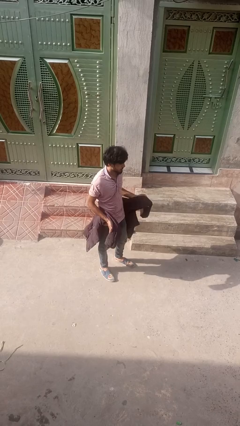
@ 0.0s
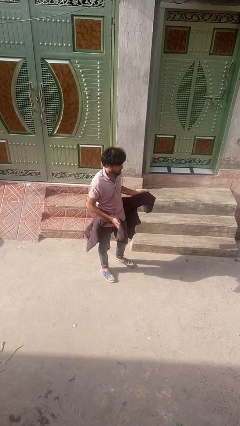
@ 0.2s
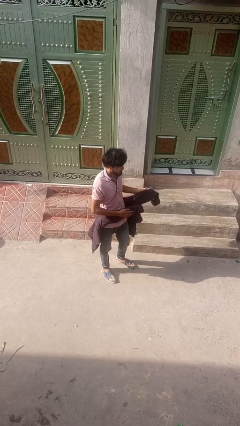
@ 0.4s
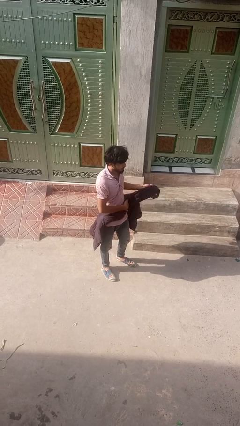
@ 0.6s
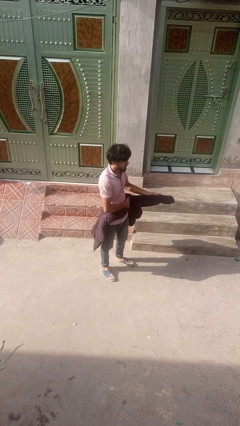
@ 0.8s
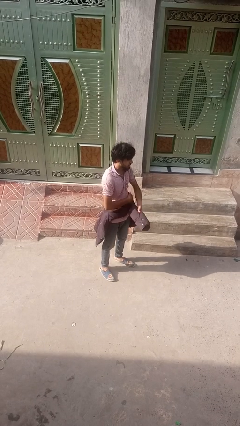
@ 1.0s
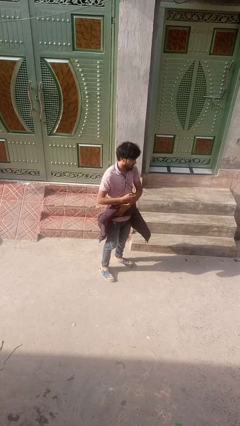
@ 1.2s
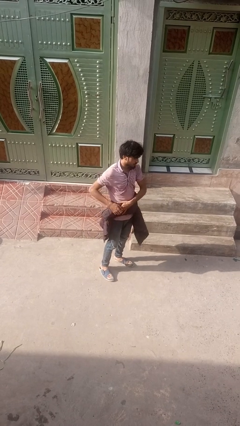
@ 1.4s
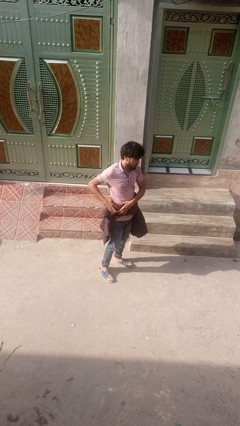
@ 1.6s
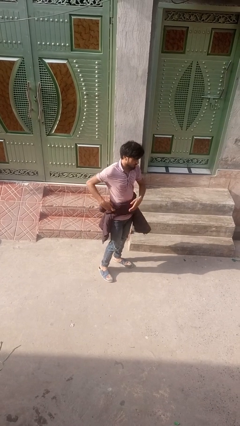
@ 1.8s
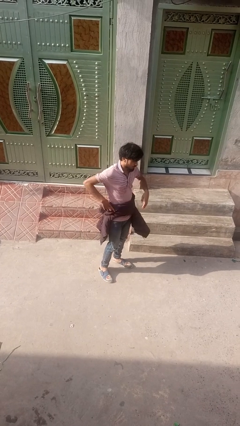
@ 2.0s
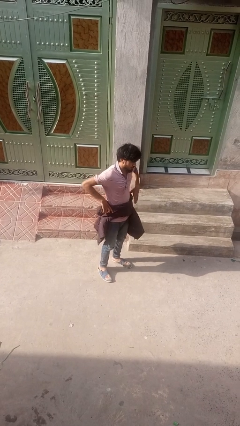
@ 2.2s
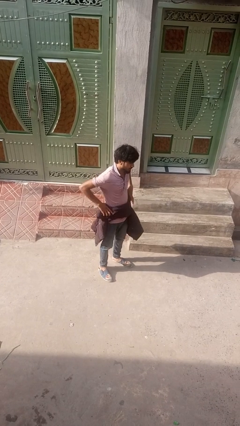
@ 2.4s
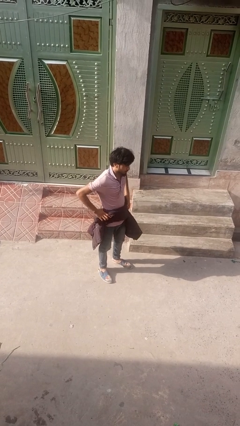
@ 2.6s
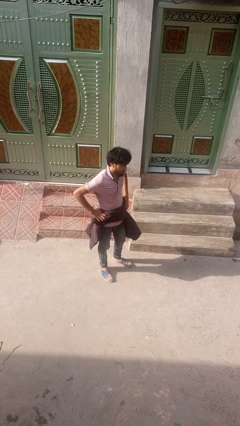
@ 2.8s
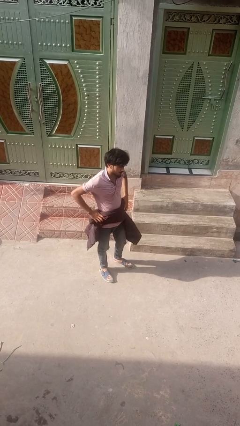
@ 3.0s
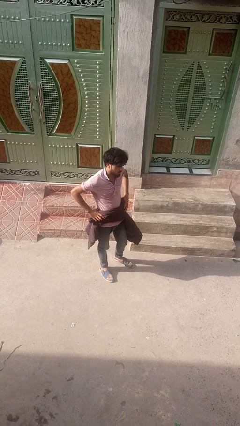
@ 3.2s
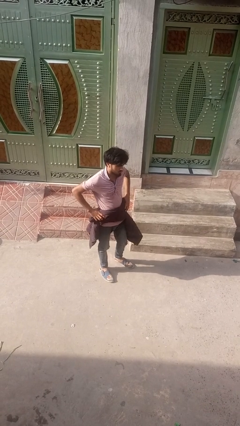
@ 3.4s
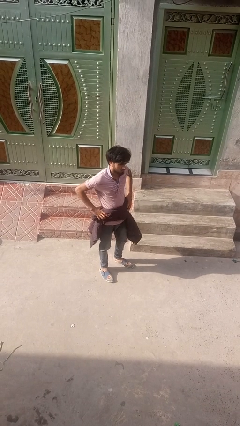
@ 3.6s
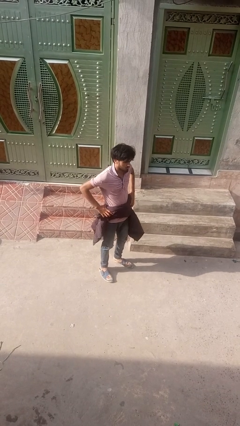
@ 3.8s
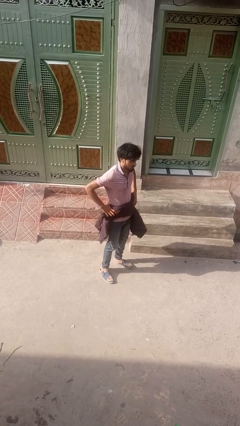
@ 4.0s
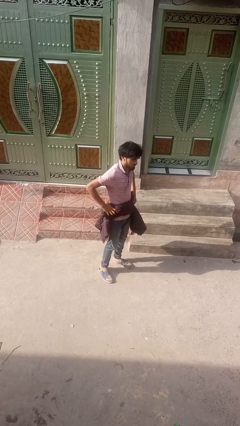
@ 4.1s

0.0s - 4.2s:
person ties jacket around waist

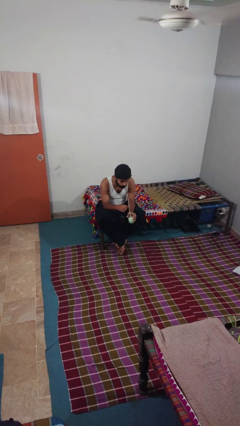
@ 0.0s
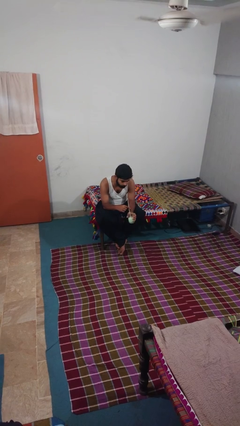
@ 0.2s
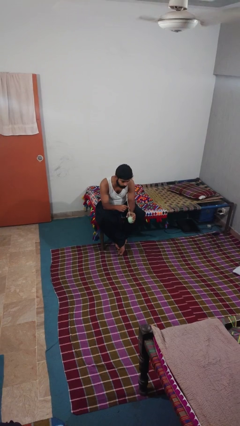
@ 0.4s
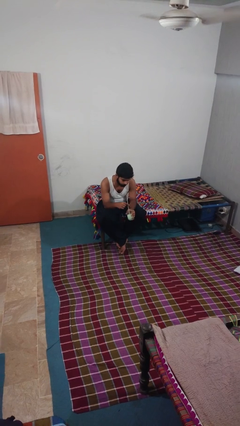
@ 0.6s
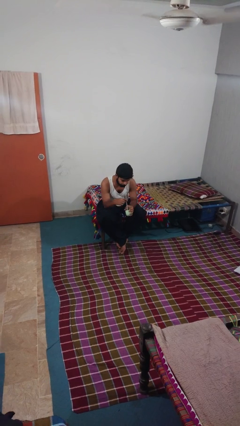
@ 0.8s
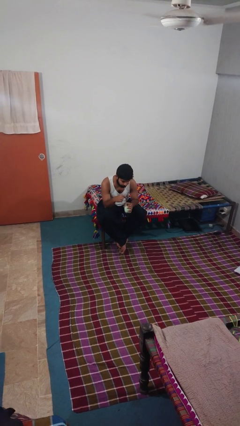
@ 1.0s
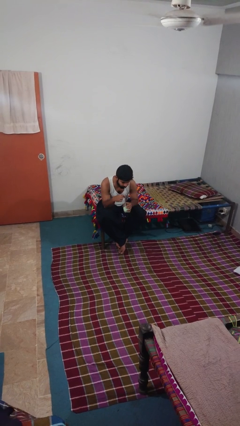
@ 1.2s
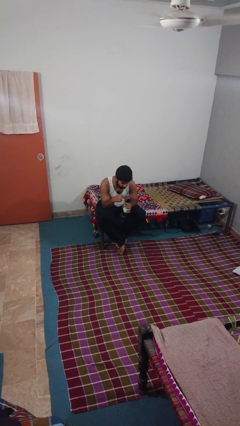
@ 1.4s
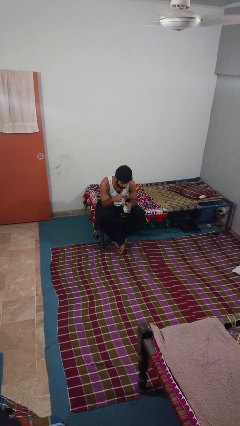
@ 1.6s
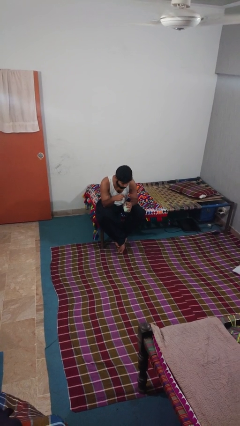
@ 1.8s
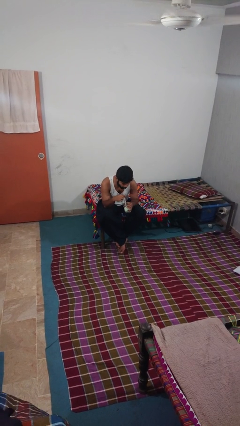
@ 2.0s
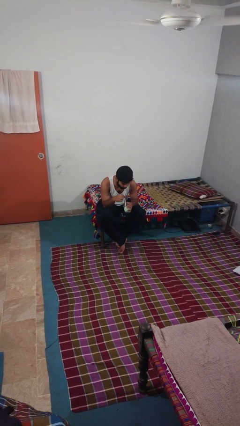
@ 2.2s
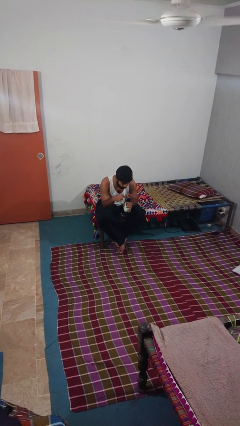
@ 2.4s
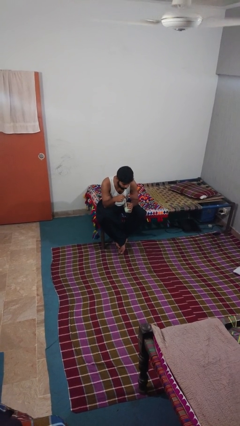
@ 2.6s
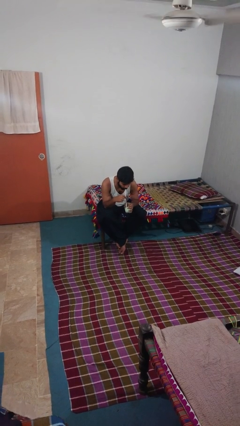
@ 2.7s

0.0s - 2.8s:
person drinks from straw

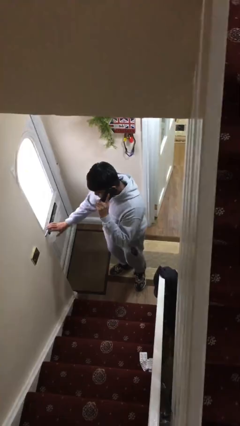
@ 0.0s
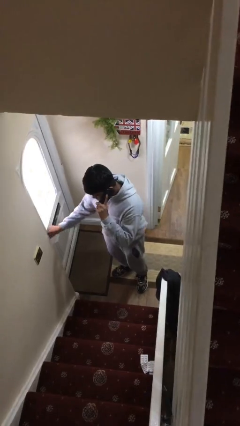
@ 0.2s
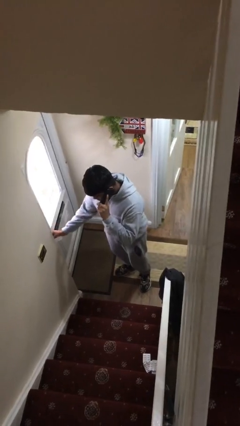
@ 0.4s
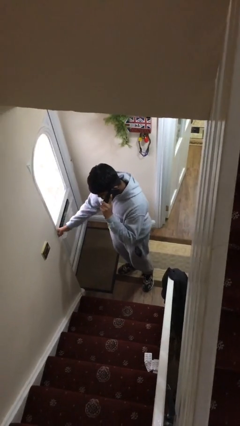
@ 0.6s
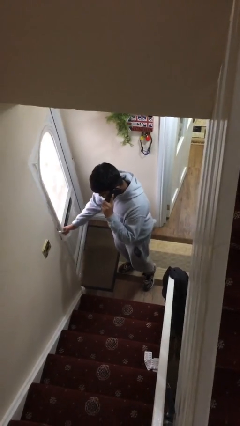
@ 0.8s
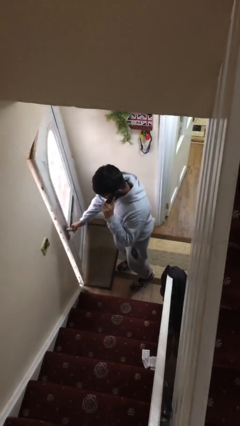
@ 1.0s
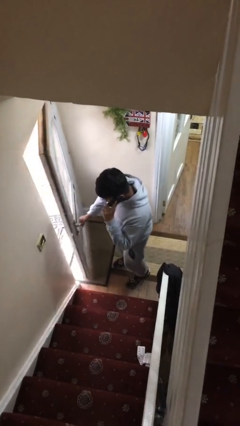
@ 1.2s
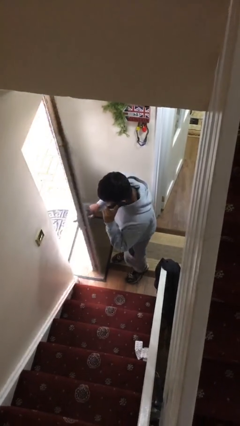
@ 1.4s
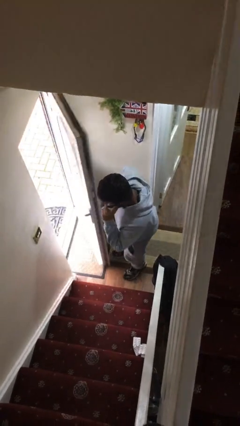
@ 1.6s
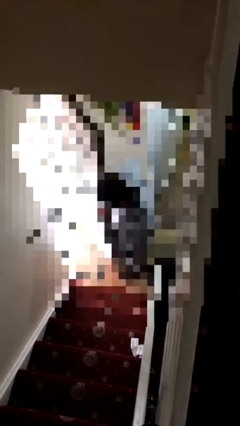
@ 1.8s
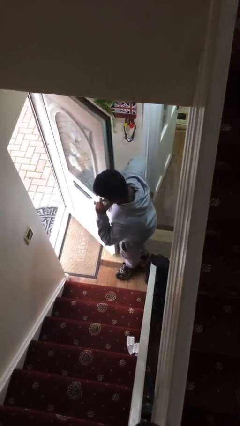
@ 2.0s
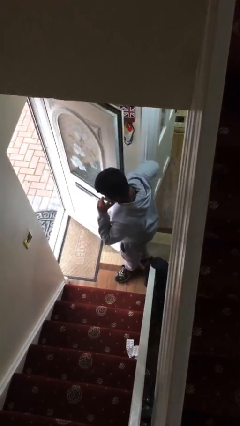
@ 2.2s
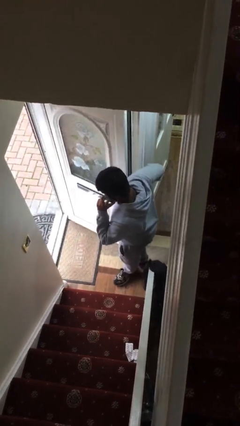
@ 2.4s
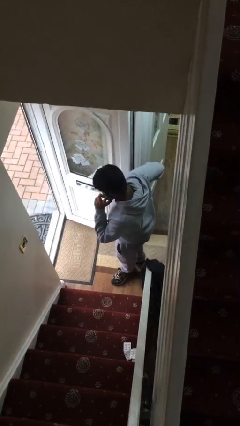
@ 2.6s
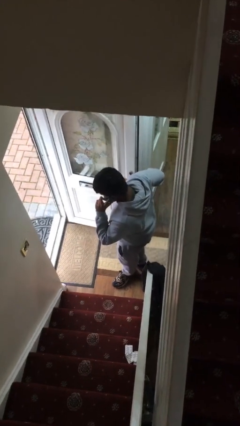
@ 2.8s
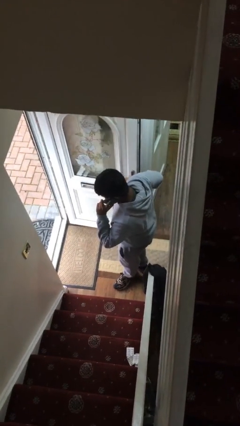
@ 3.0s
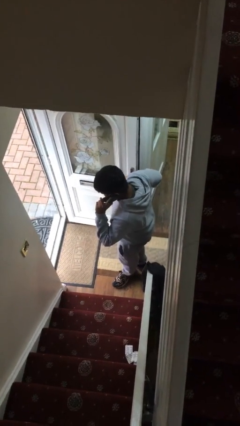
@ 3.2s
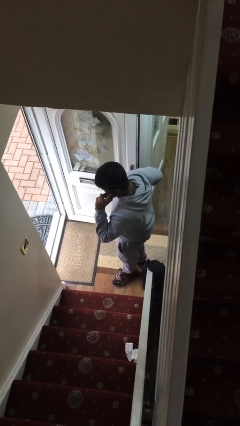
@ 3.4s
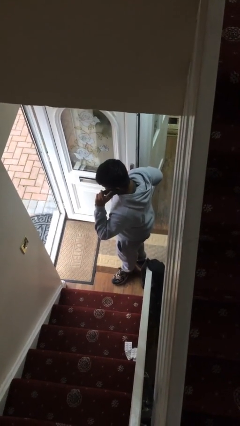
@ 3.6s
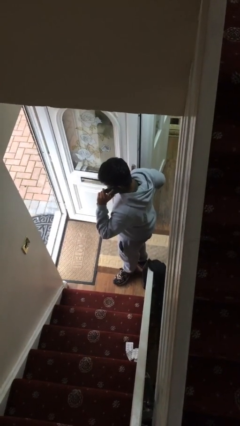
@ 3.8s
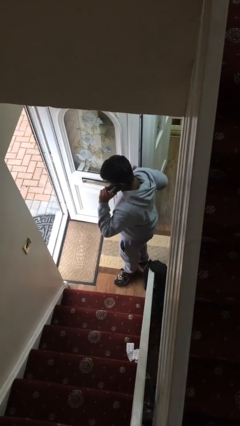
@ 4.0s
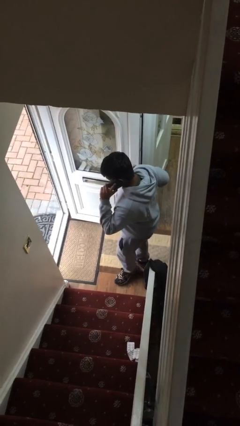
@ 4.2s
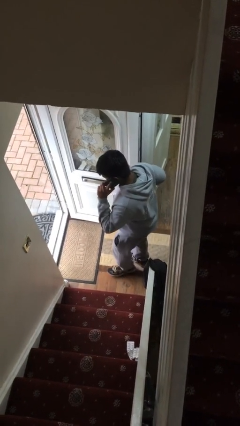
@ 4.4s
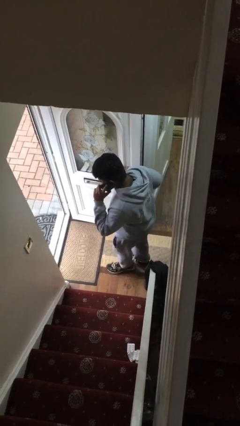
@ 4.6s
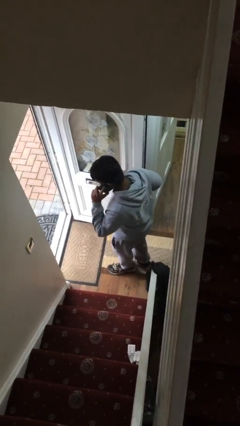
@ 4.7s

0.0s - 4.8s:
person opens facility door

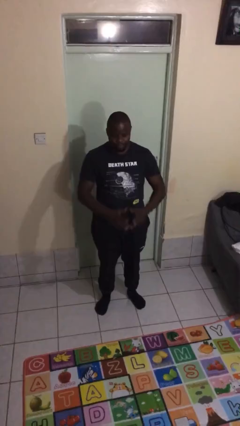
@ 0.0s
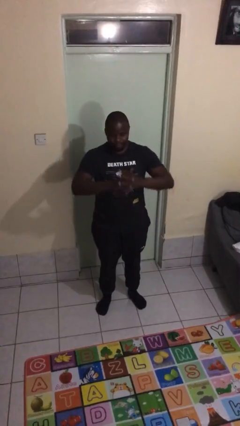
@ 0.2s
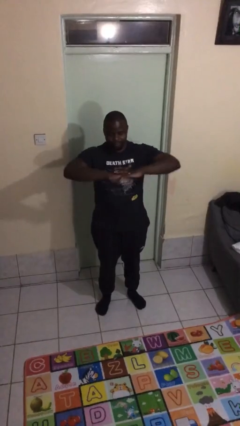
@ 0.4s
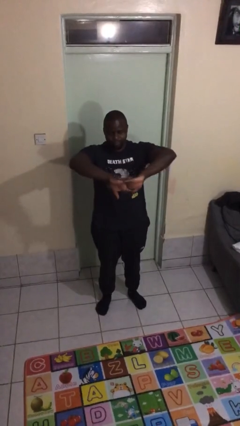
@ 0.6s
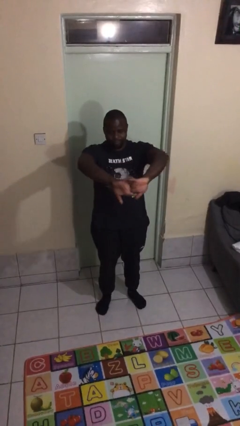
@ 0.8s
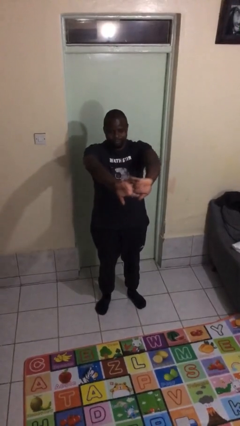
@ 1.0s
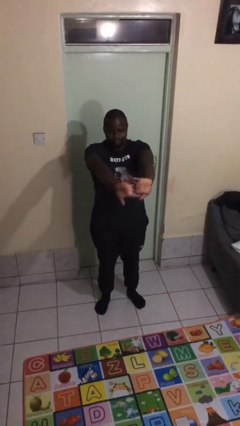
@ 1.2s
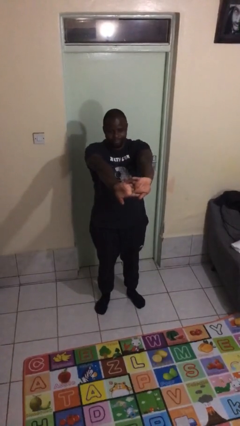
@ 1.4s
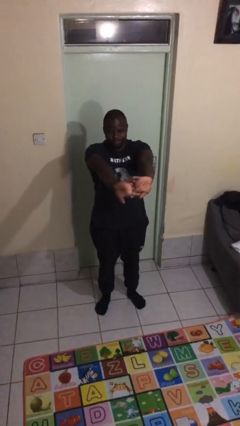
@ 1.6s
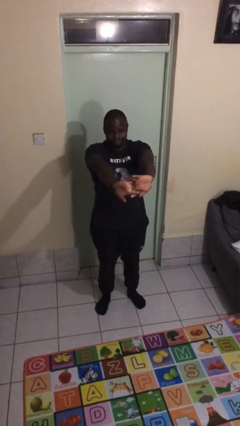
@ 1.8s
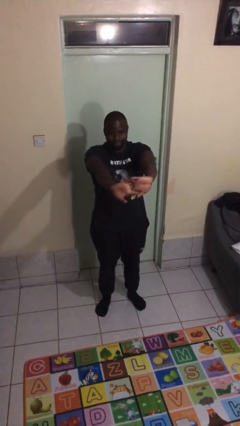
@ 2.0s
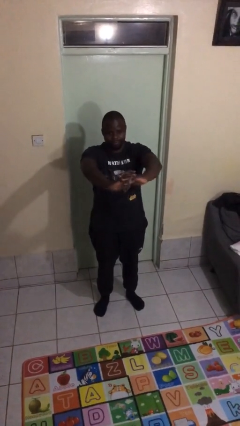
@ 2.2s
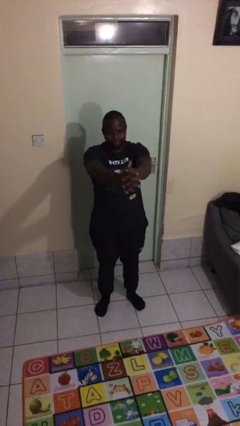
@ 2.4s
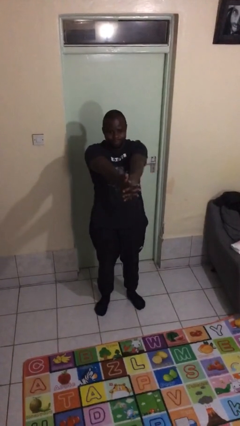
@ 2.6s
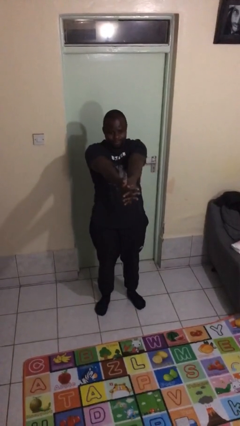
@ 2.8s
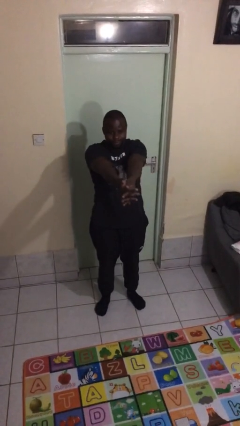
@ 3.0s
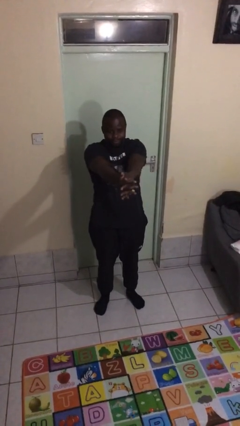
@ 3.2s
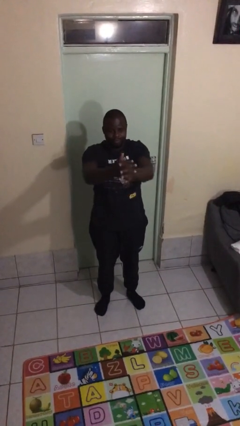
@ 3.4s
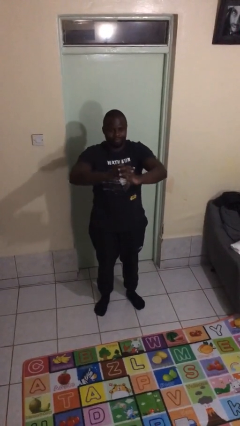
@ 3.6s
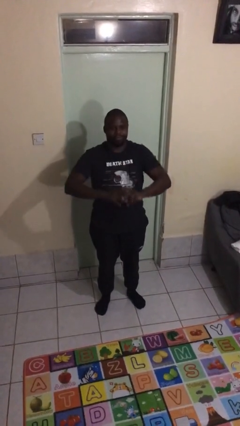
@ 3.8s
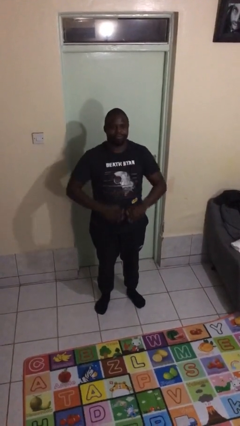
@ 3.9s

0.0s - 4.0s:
person cracks knuckles

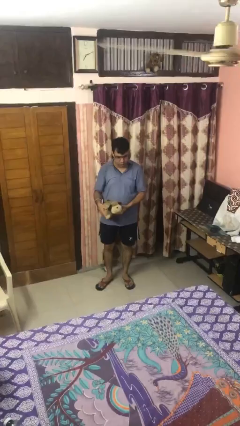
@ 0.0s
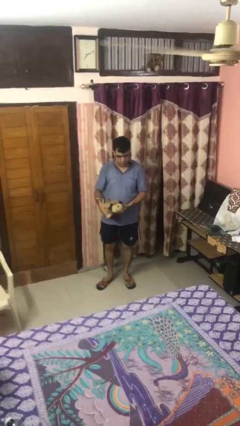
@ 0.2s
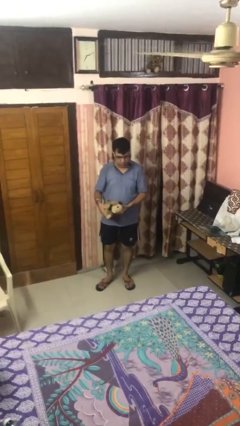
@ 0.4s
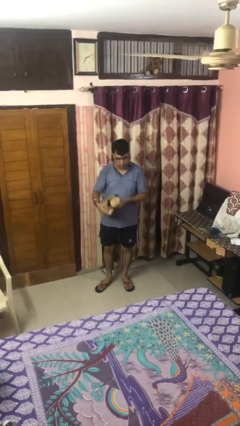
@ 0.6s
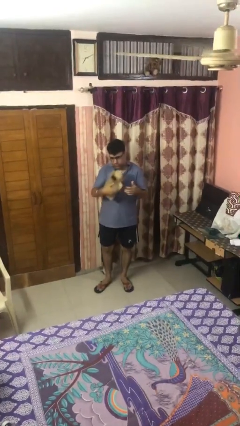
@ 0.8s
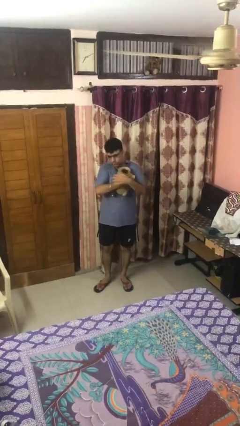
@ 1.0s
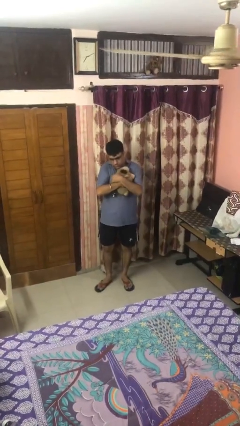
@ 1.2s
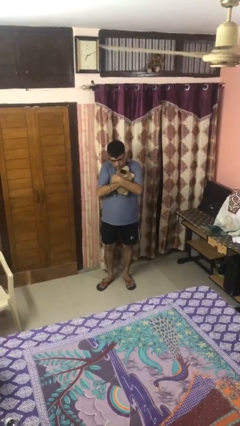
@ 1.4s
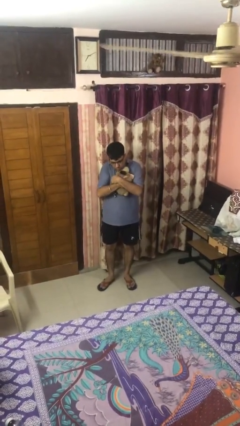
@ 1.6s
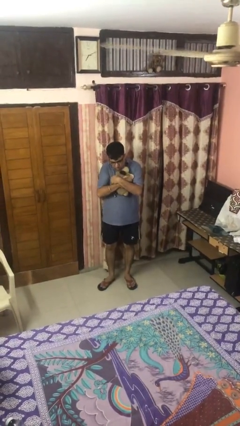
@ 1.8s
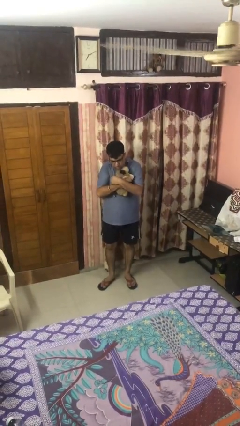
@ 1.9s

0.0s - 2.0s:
person hugs stuffed animal
